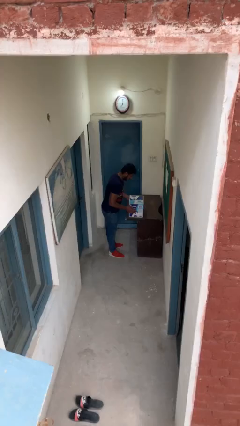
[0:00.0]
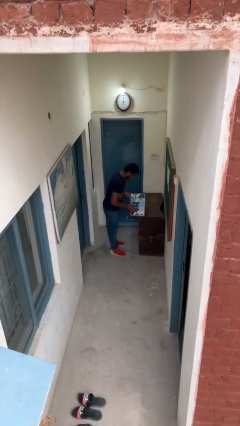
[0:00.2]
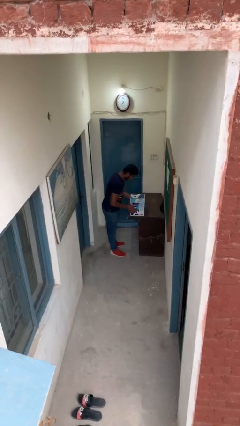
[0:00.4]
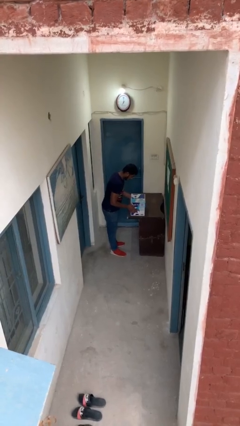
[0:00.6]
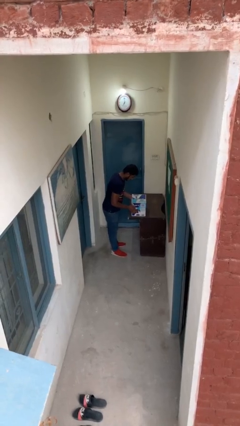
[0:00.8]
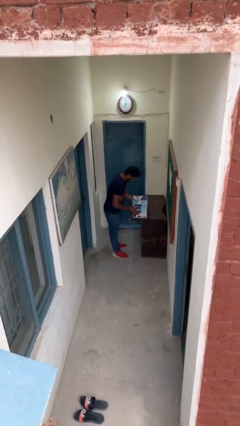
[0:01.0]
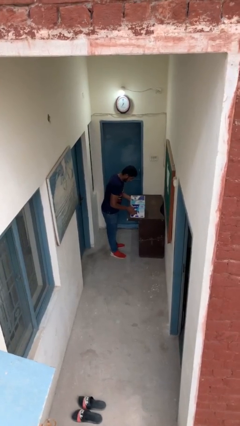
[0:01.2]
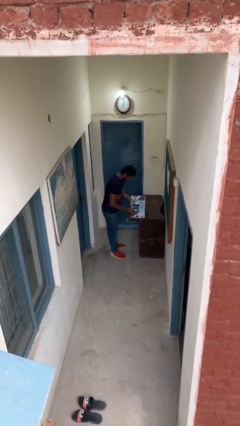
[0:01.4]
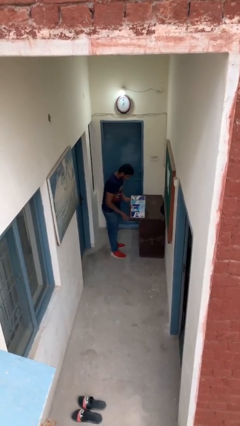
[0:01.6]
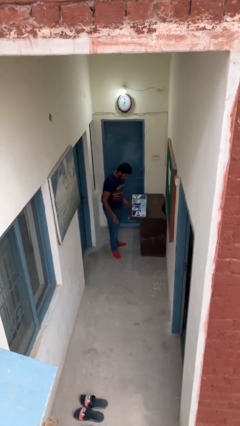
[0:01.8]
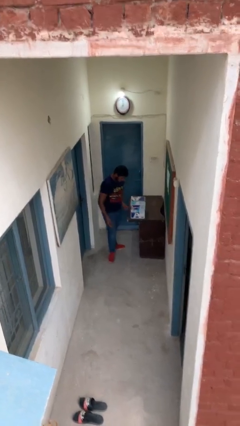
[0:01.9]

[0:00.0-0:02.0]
person puts down object on table

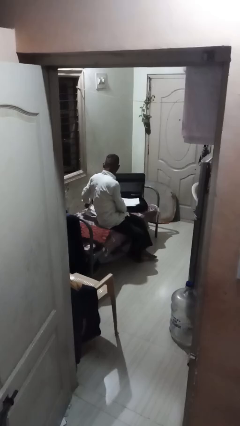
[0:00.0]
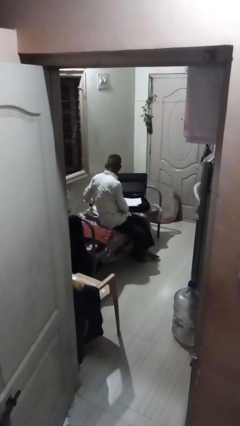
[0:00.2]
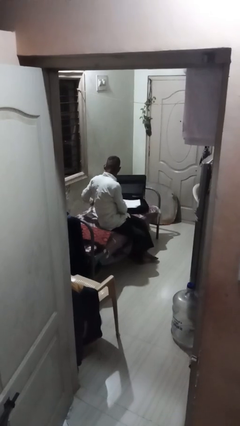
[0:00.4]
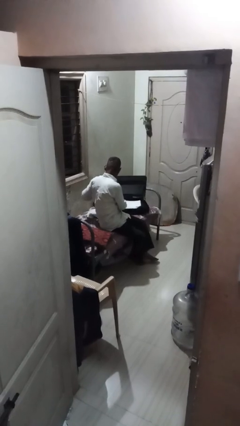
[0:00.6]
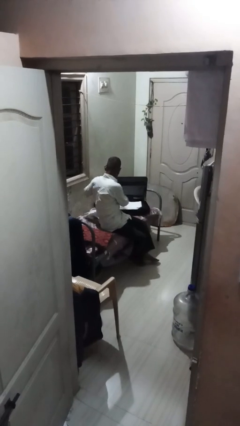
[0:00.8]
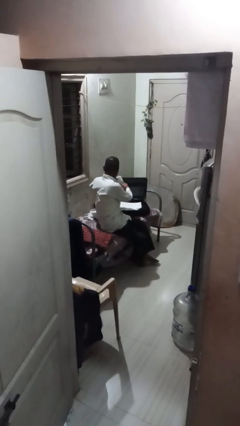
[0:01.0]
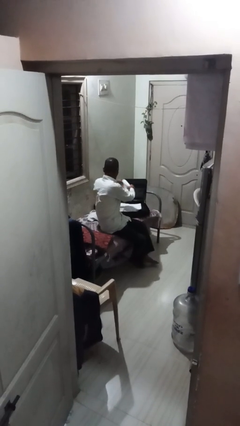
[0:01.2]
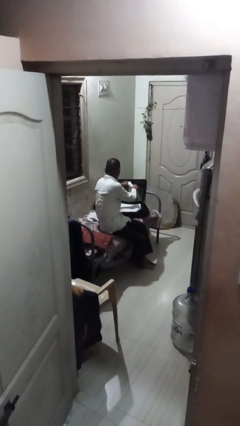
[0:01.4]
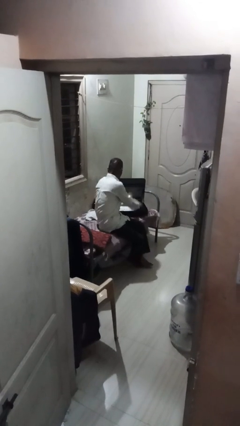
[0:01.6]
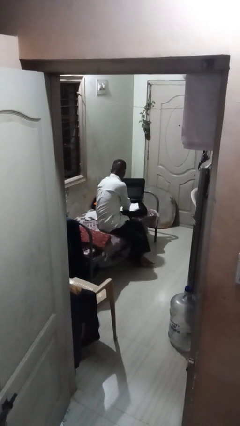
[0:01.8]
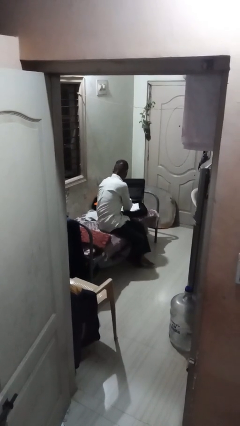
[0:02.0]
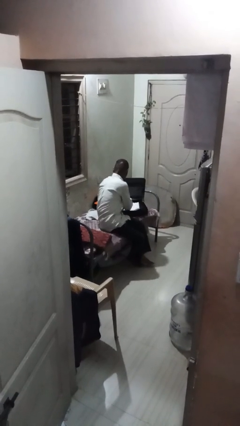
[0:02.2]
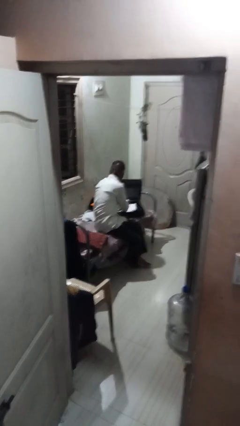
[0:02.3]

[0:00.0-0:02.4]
person loads clothes into suitcase

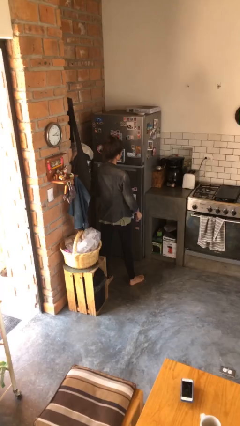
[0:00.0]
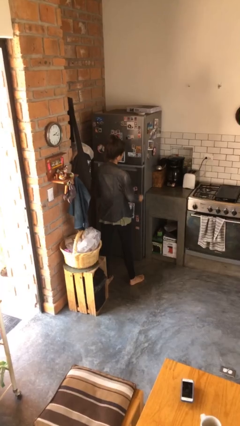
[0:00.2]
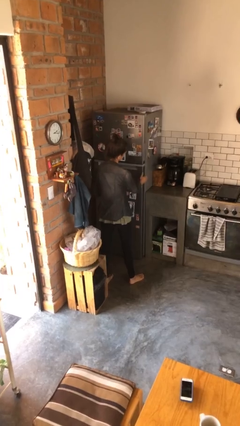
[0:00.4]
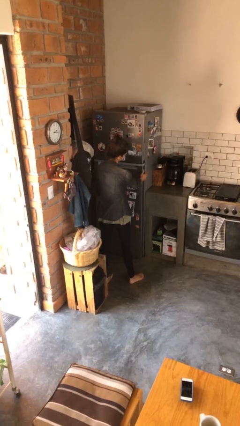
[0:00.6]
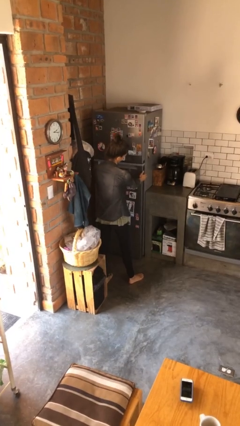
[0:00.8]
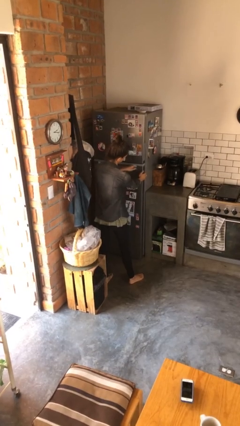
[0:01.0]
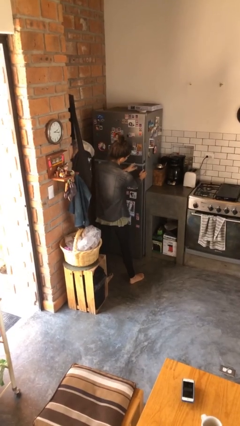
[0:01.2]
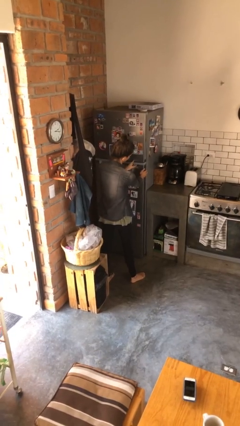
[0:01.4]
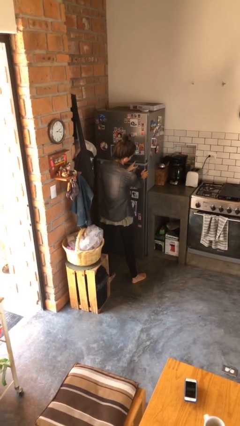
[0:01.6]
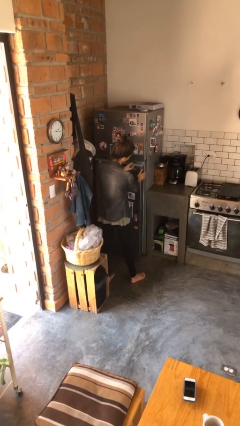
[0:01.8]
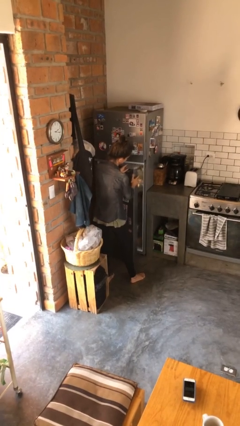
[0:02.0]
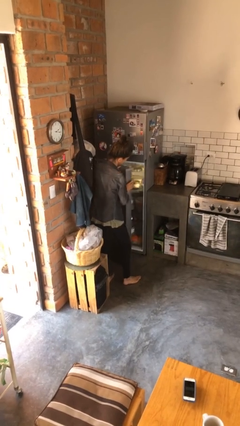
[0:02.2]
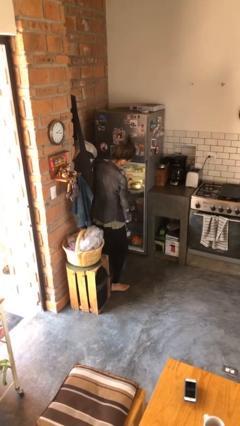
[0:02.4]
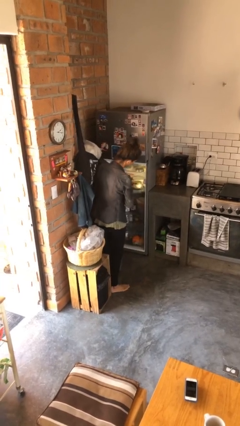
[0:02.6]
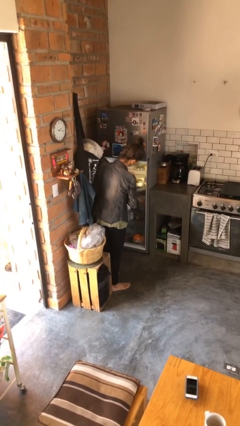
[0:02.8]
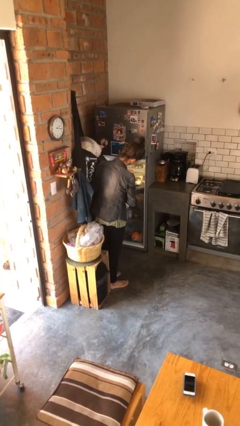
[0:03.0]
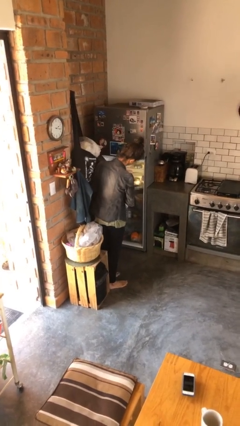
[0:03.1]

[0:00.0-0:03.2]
person opens refrigerator

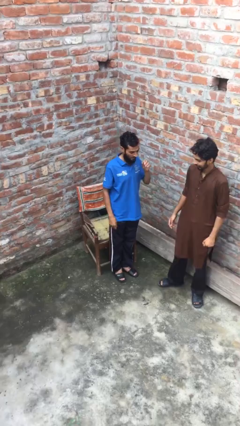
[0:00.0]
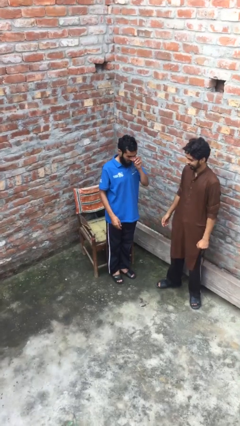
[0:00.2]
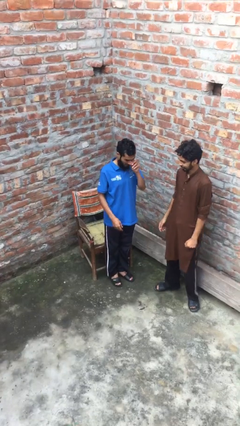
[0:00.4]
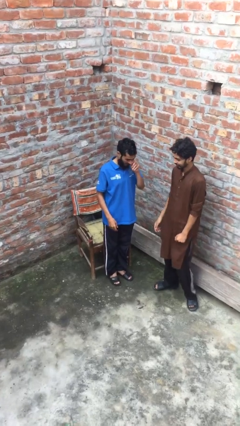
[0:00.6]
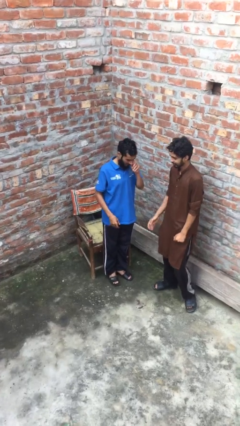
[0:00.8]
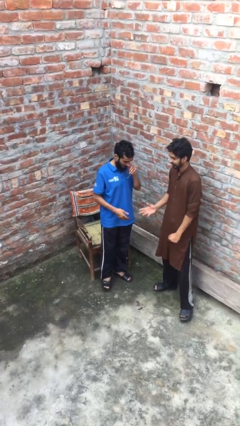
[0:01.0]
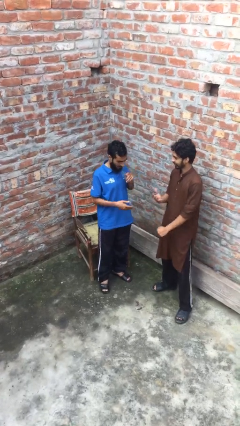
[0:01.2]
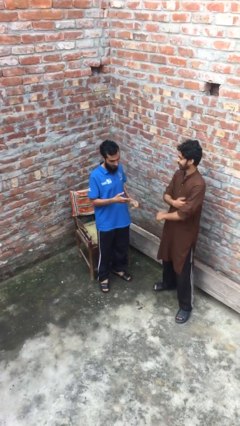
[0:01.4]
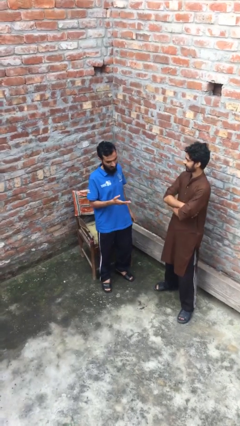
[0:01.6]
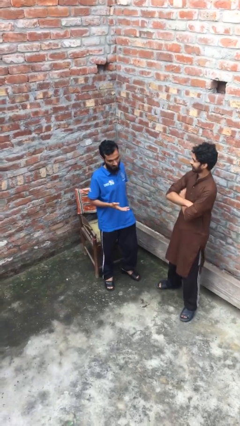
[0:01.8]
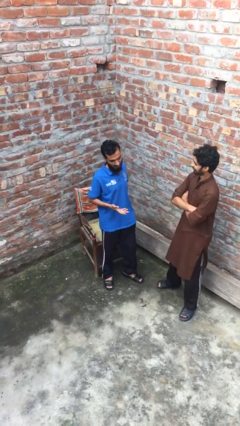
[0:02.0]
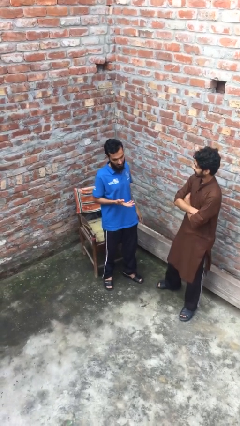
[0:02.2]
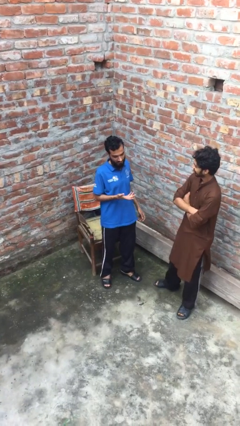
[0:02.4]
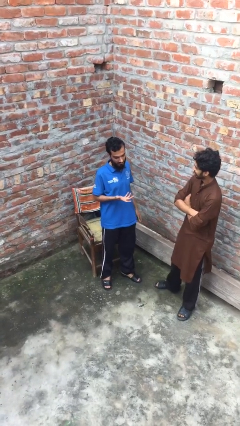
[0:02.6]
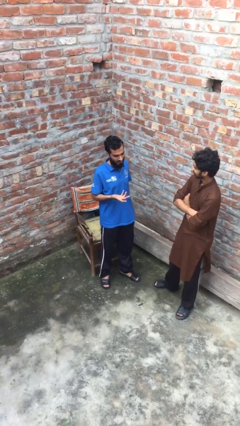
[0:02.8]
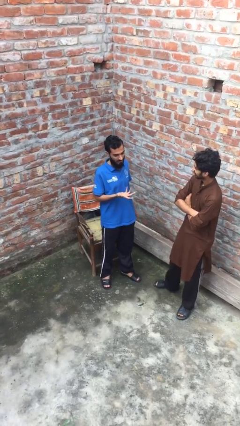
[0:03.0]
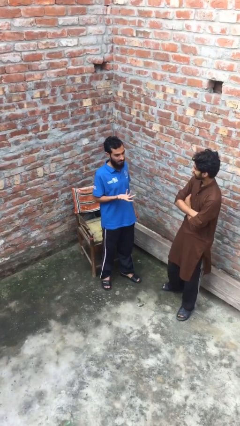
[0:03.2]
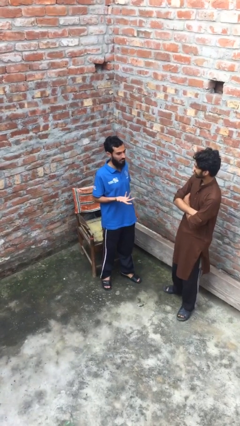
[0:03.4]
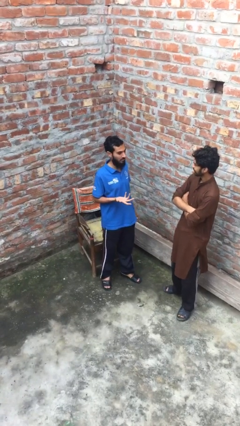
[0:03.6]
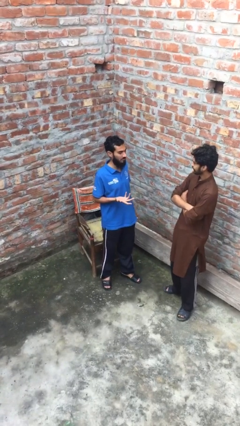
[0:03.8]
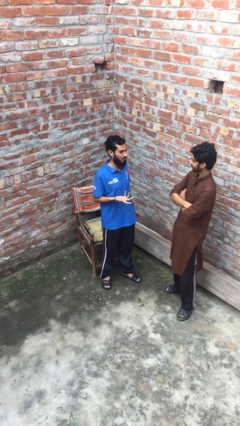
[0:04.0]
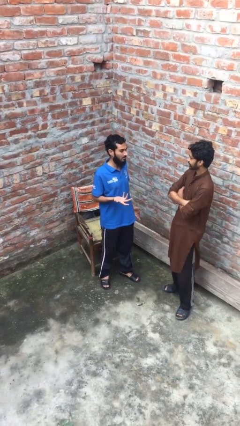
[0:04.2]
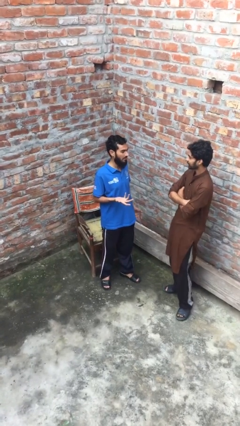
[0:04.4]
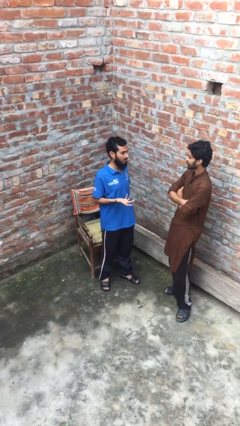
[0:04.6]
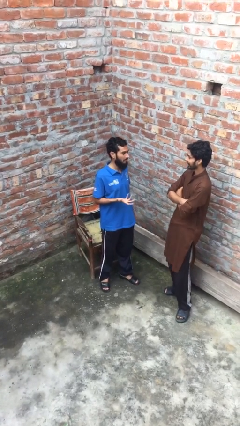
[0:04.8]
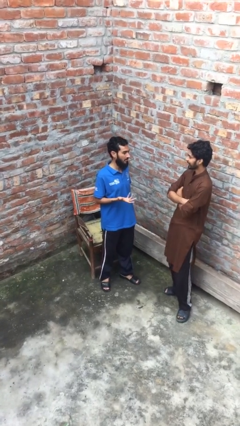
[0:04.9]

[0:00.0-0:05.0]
person talks to person

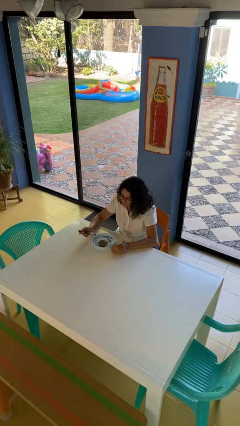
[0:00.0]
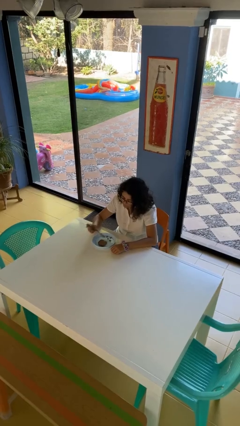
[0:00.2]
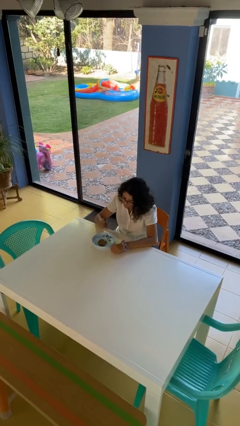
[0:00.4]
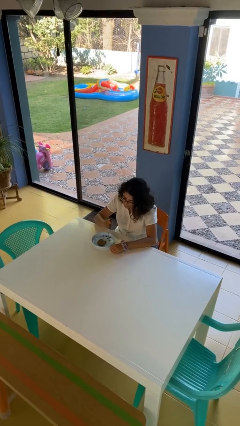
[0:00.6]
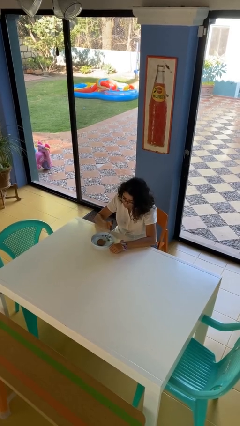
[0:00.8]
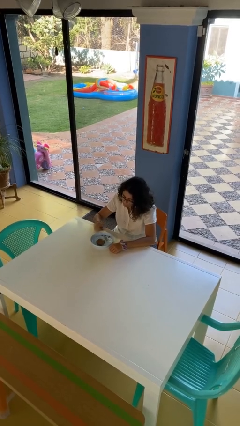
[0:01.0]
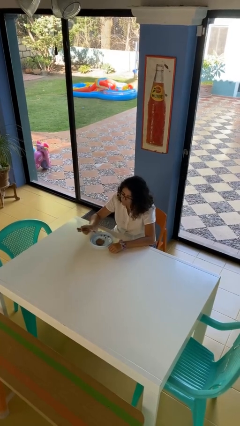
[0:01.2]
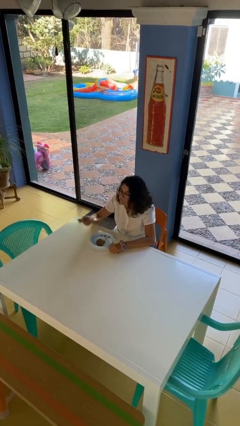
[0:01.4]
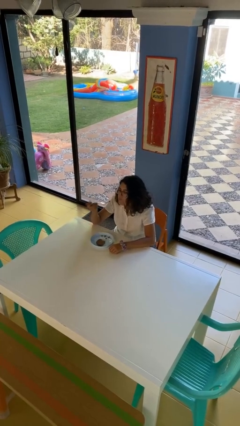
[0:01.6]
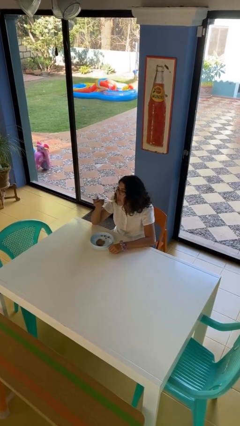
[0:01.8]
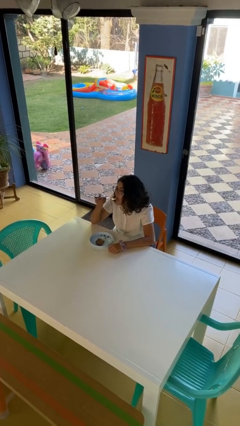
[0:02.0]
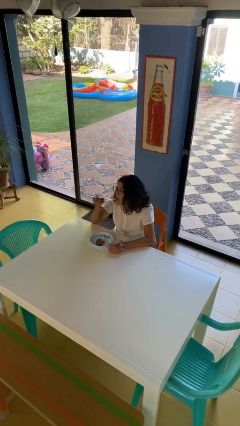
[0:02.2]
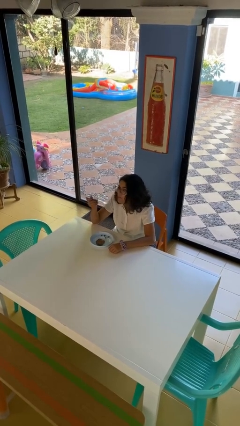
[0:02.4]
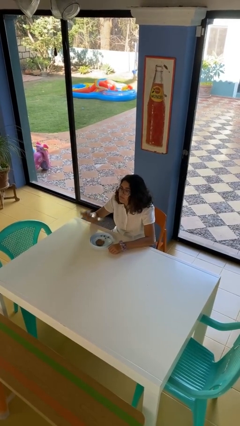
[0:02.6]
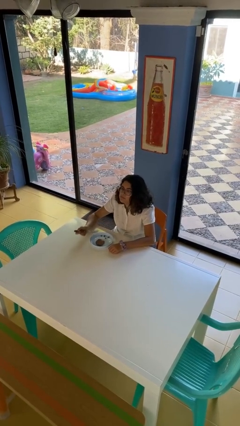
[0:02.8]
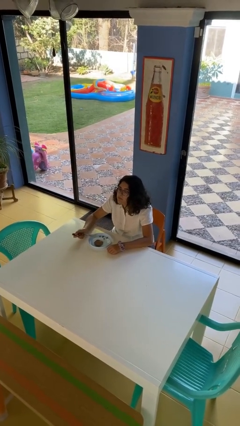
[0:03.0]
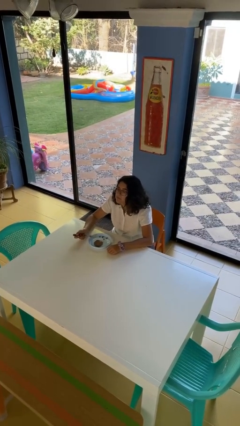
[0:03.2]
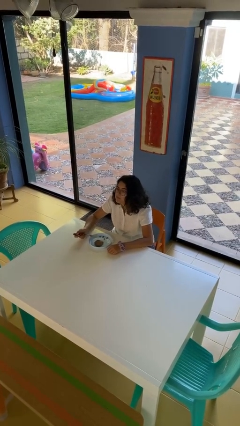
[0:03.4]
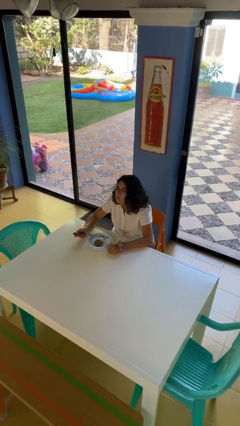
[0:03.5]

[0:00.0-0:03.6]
person eats with utensil

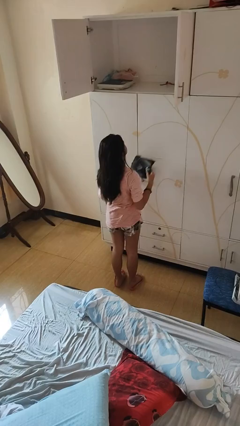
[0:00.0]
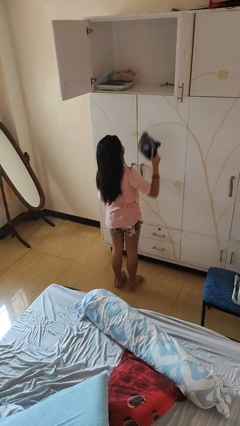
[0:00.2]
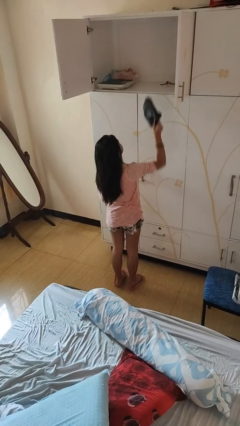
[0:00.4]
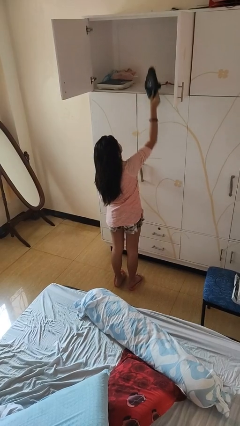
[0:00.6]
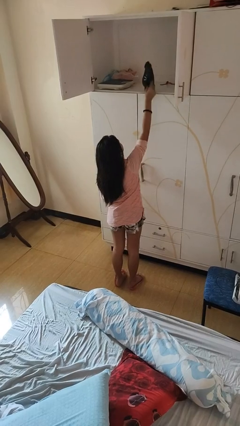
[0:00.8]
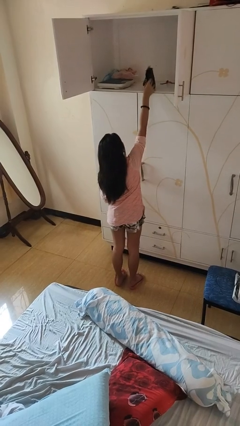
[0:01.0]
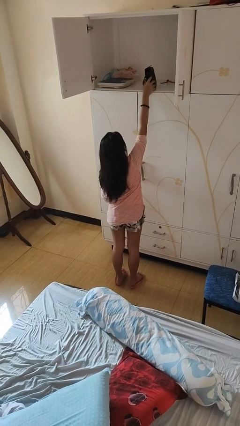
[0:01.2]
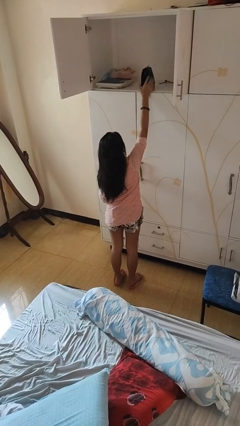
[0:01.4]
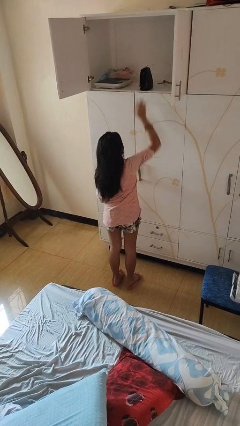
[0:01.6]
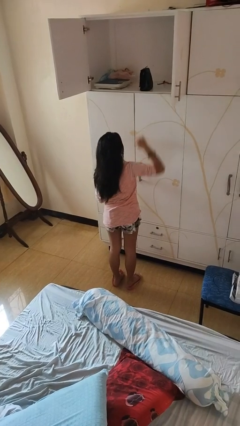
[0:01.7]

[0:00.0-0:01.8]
person puts down object on shelf
